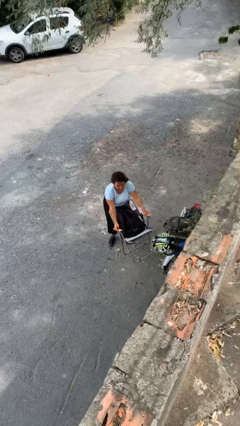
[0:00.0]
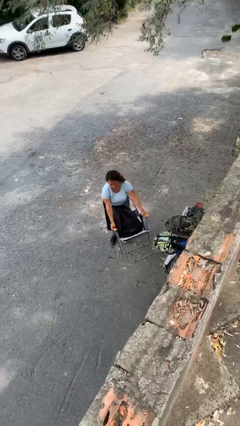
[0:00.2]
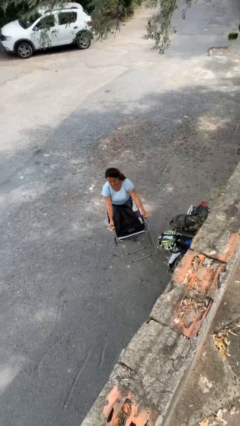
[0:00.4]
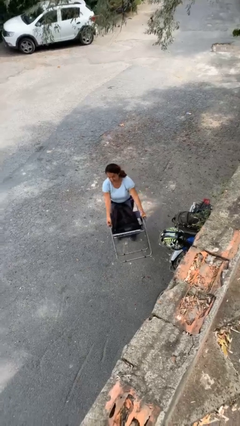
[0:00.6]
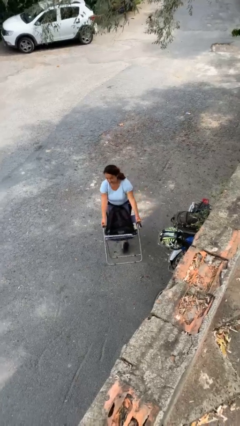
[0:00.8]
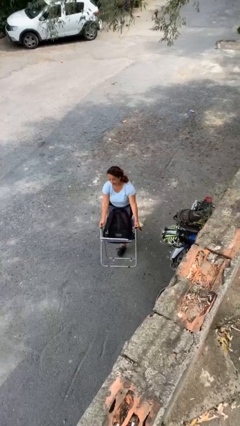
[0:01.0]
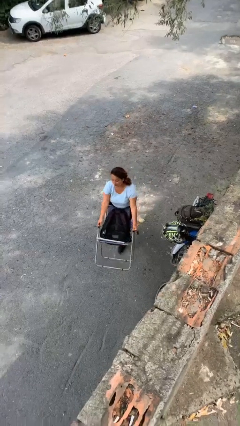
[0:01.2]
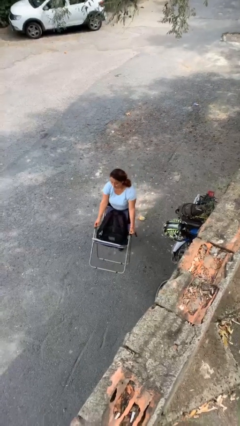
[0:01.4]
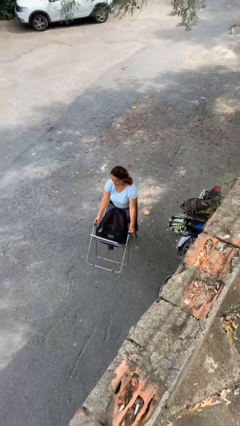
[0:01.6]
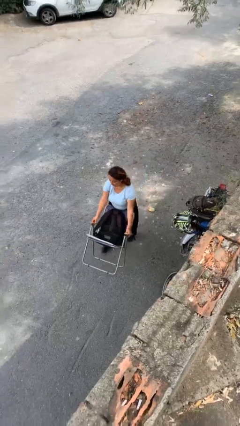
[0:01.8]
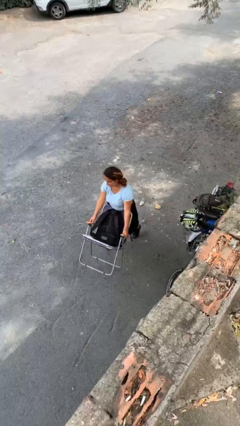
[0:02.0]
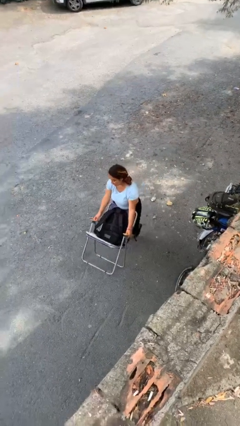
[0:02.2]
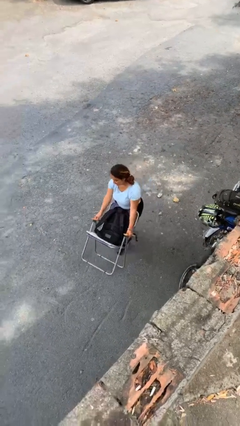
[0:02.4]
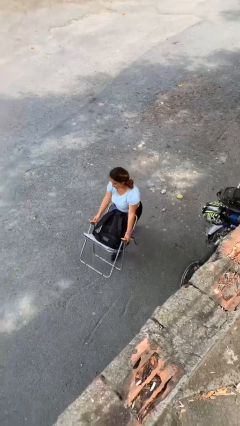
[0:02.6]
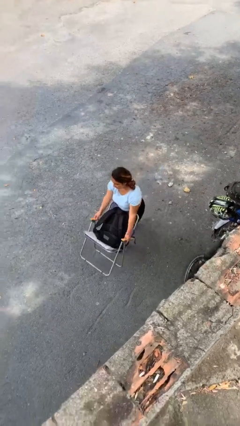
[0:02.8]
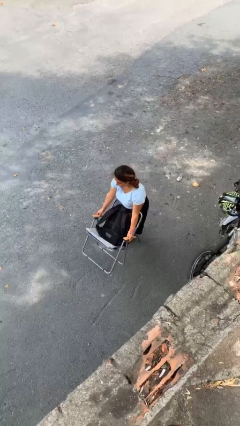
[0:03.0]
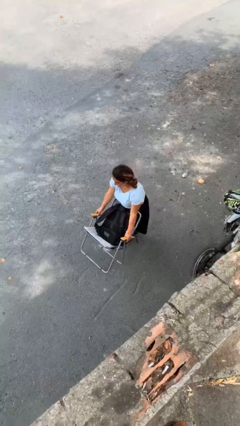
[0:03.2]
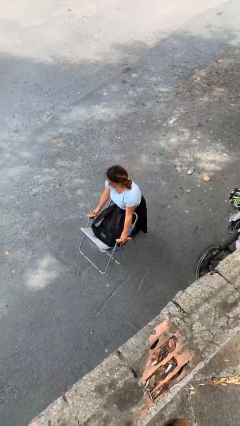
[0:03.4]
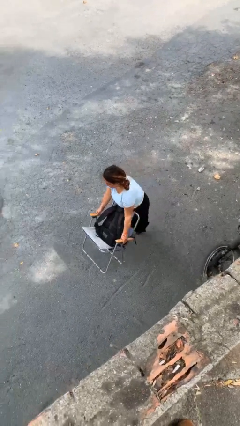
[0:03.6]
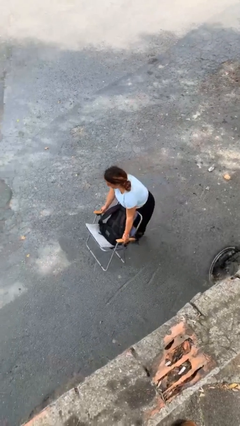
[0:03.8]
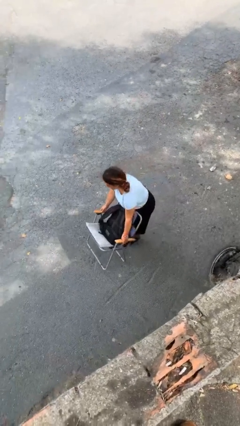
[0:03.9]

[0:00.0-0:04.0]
person carries heavy object

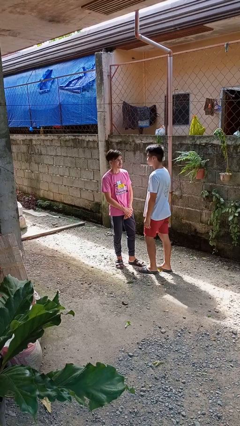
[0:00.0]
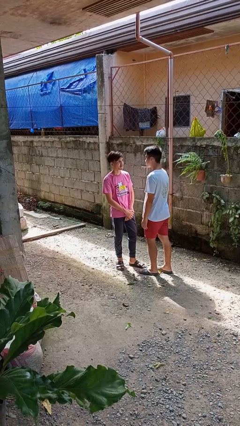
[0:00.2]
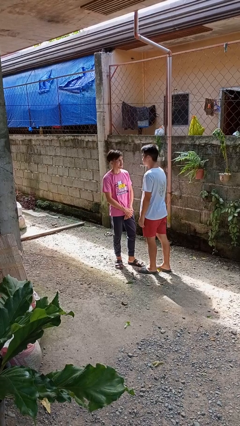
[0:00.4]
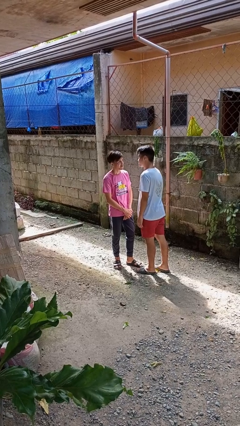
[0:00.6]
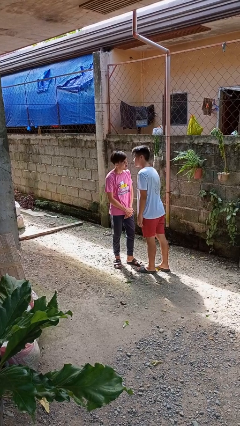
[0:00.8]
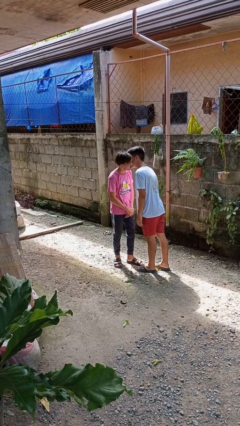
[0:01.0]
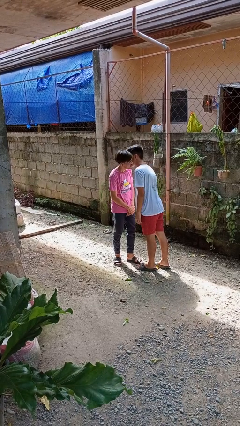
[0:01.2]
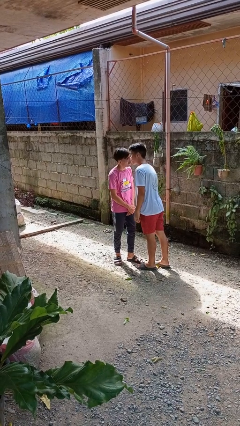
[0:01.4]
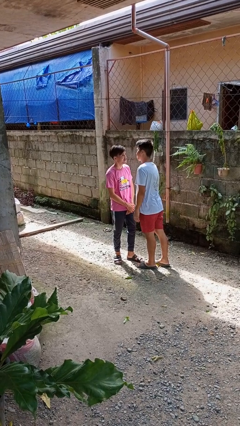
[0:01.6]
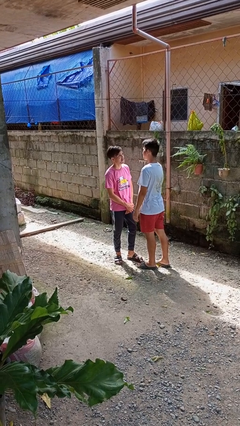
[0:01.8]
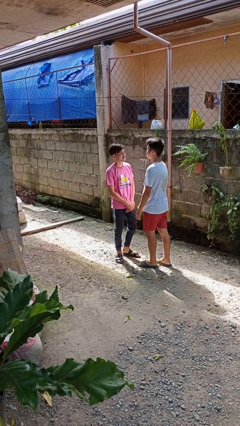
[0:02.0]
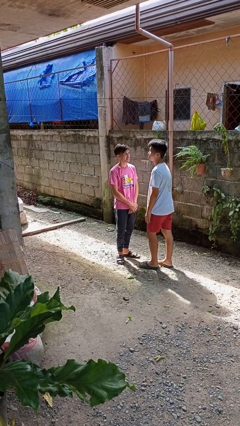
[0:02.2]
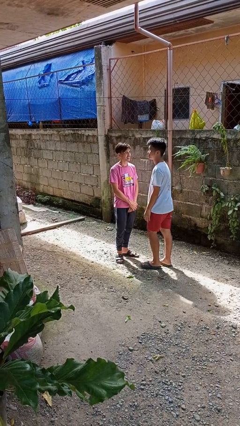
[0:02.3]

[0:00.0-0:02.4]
person kisses cheek of person

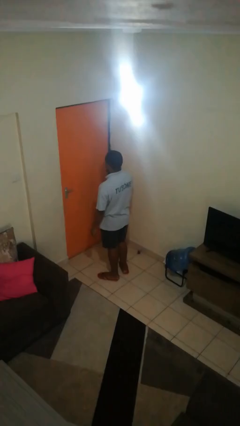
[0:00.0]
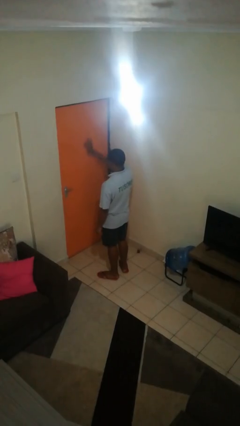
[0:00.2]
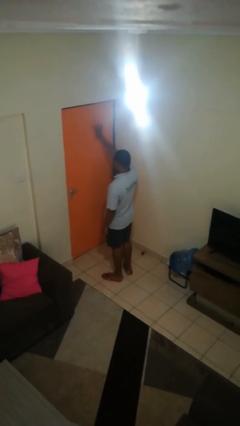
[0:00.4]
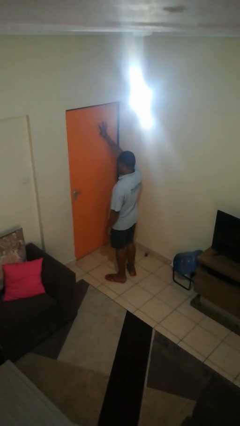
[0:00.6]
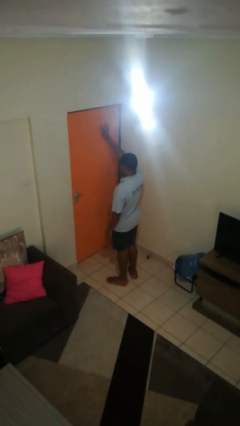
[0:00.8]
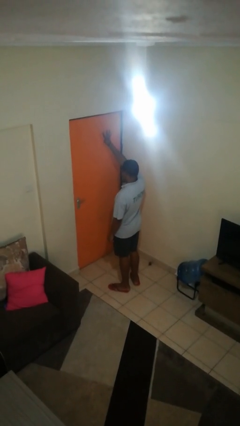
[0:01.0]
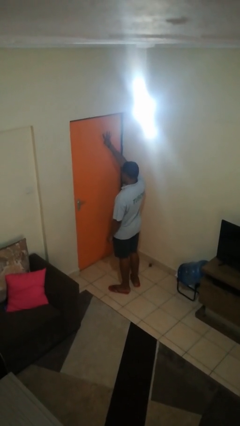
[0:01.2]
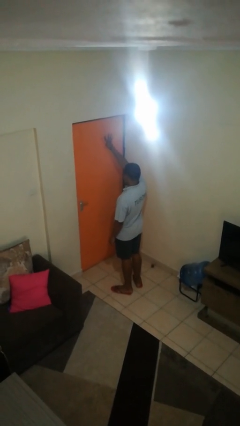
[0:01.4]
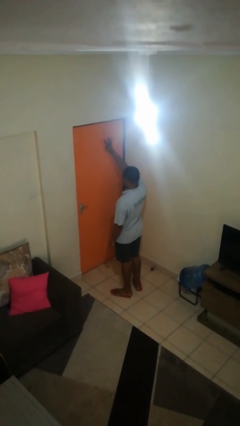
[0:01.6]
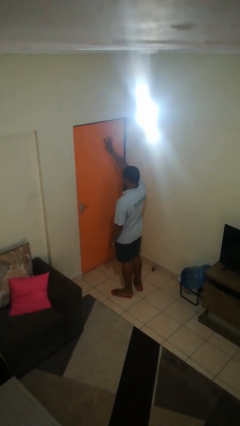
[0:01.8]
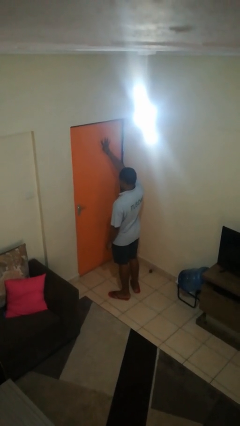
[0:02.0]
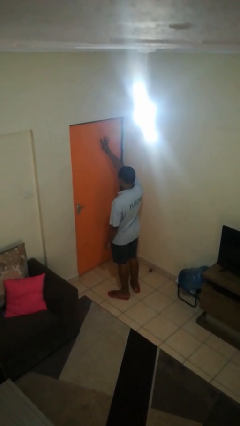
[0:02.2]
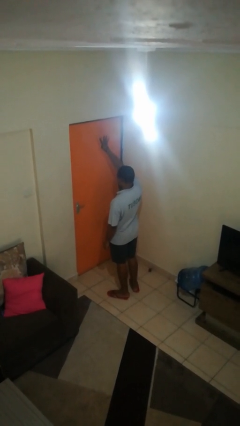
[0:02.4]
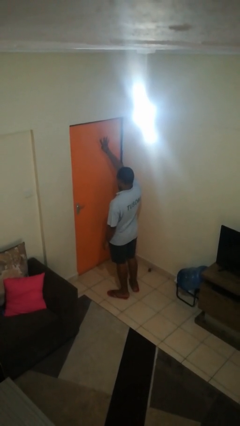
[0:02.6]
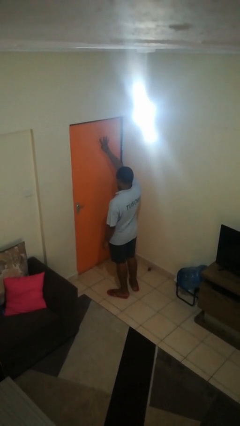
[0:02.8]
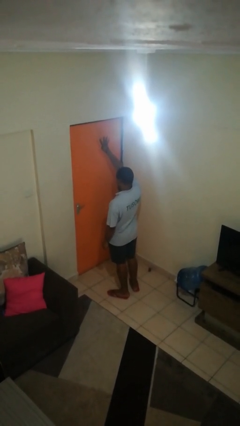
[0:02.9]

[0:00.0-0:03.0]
person gestures number four

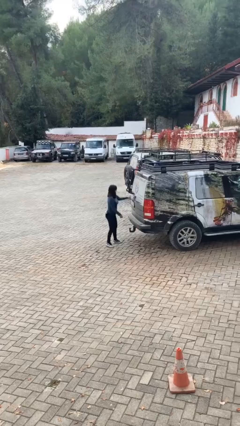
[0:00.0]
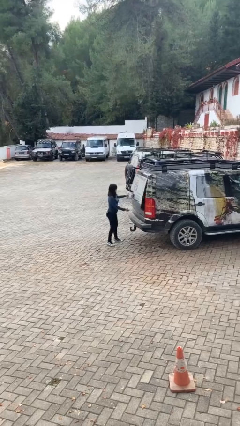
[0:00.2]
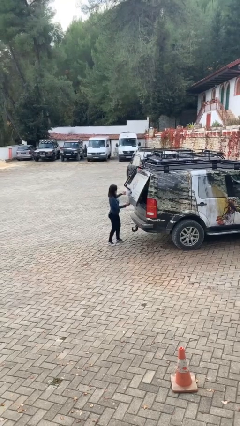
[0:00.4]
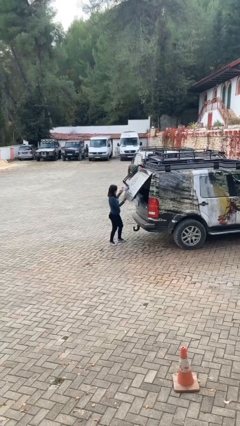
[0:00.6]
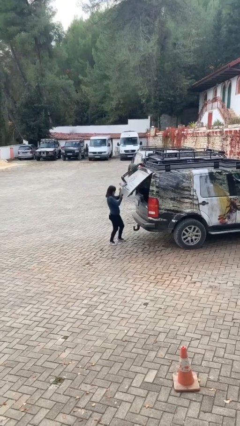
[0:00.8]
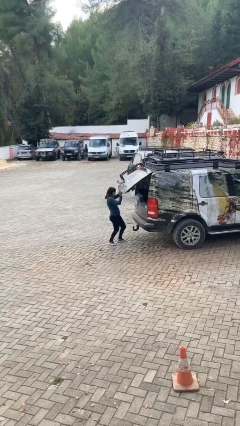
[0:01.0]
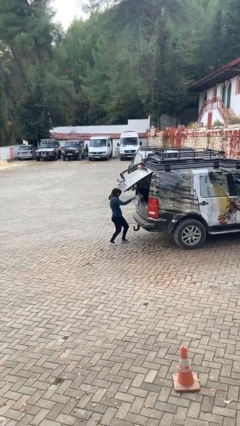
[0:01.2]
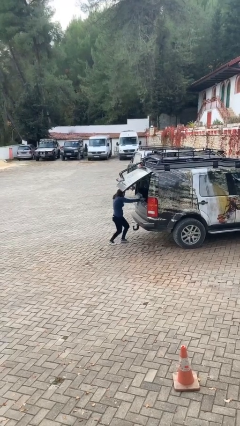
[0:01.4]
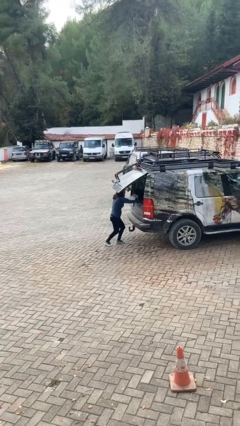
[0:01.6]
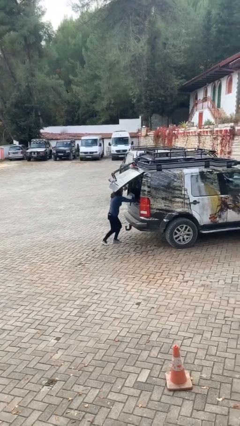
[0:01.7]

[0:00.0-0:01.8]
person opens car trunk

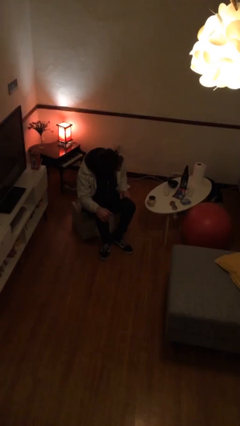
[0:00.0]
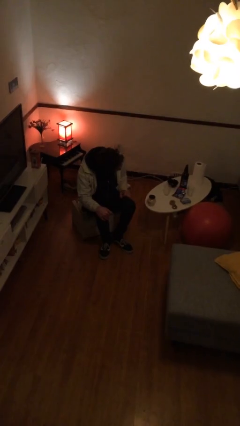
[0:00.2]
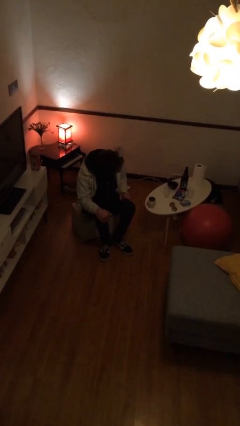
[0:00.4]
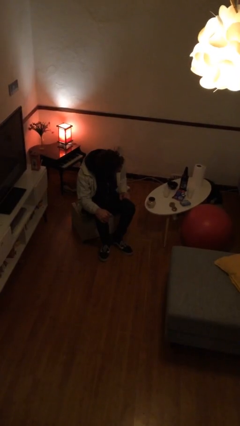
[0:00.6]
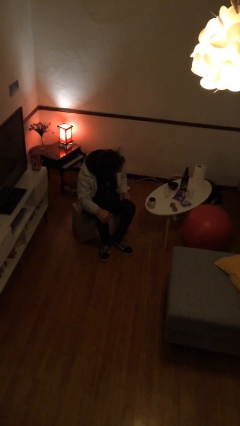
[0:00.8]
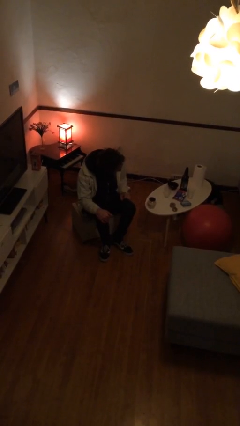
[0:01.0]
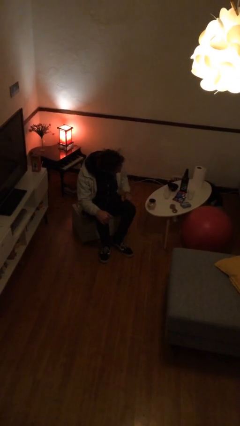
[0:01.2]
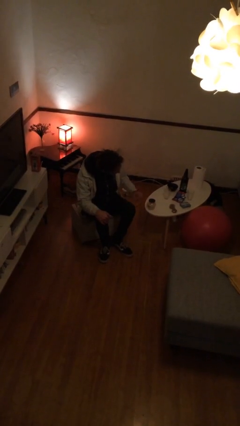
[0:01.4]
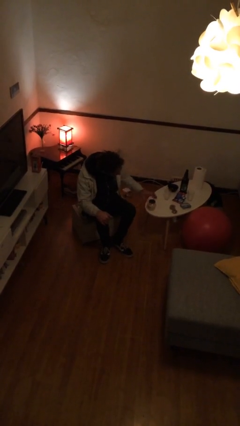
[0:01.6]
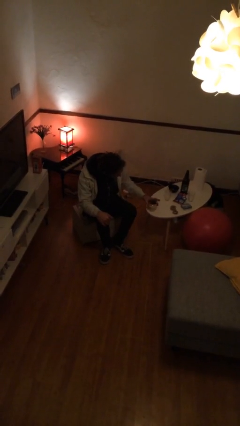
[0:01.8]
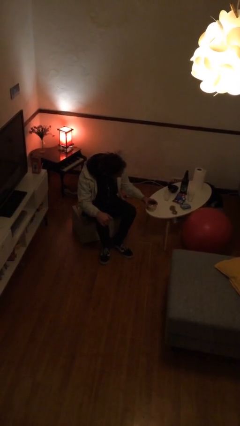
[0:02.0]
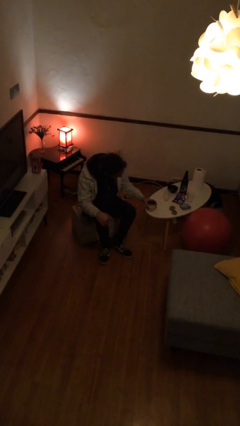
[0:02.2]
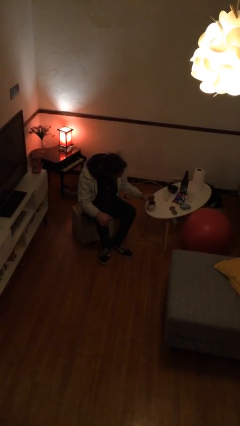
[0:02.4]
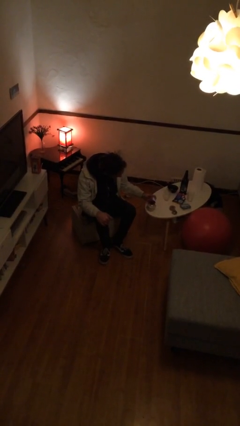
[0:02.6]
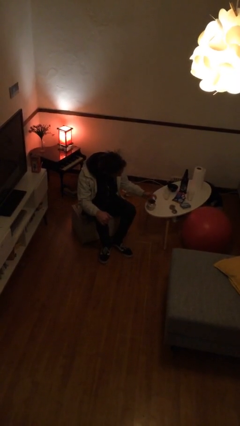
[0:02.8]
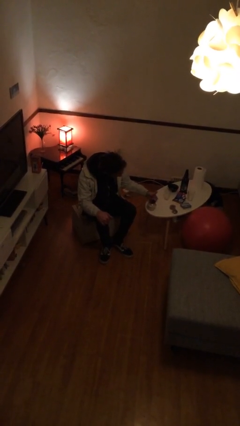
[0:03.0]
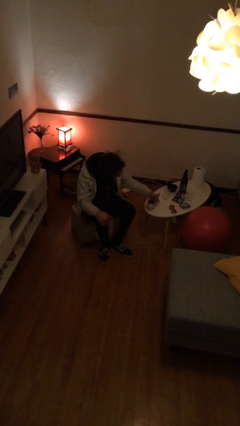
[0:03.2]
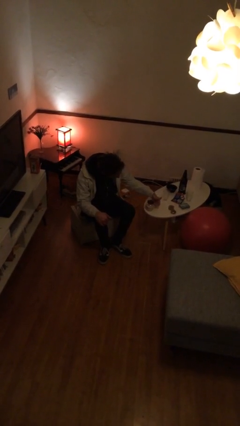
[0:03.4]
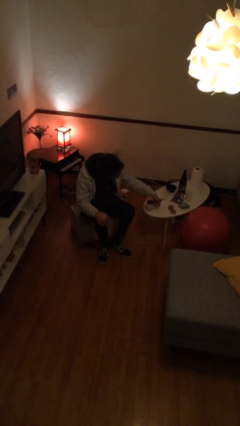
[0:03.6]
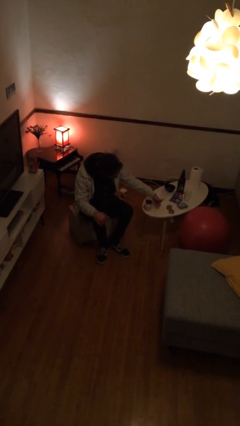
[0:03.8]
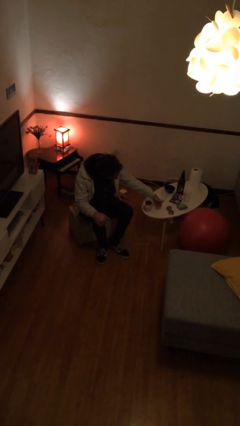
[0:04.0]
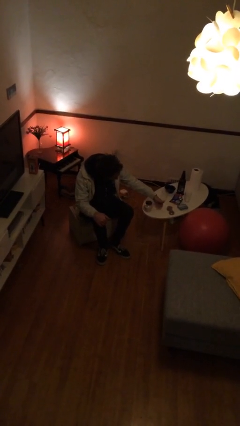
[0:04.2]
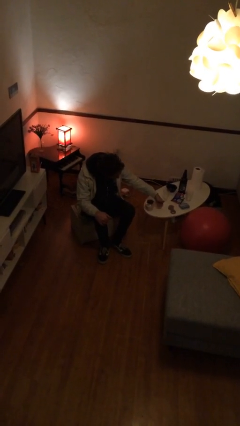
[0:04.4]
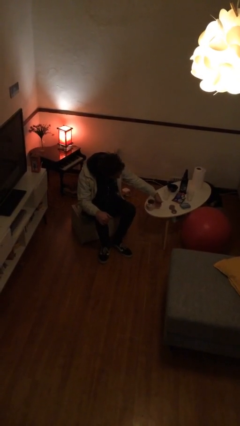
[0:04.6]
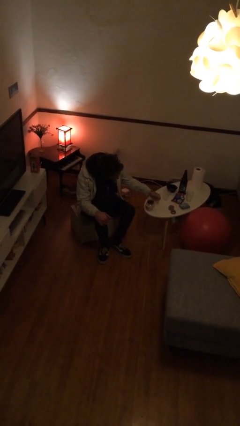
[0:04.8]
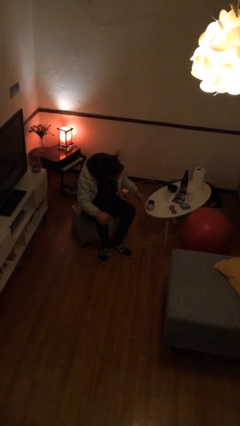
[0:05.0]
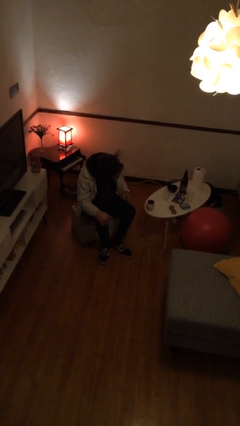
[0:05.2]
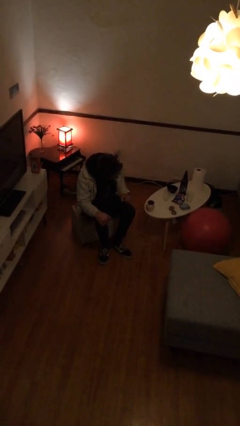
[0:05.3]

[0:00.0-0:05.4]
person taps object with finger

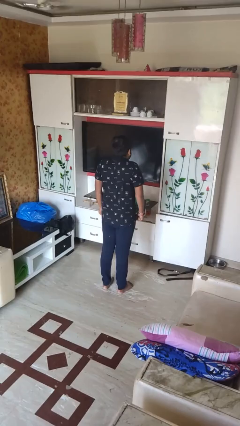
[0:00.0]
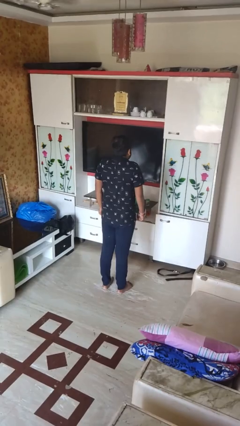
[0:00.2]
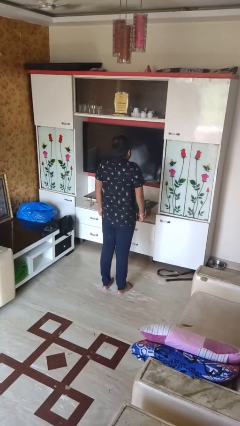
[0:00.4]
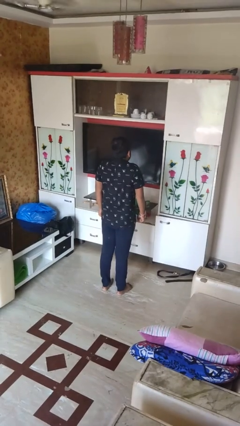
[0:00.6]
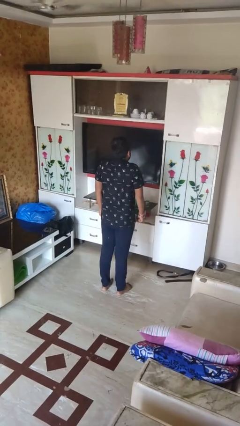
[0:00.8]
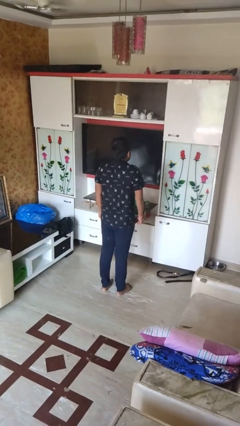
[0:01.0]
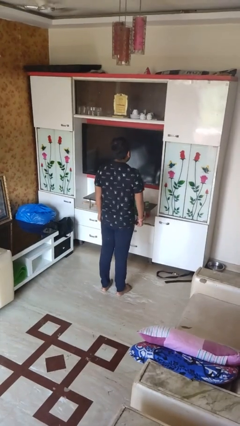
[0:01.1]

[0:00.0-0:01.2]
person shrugs
